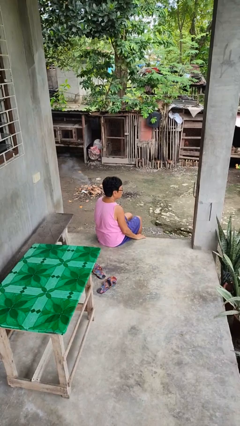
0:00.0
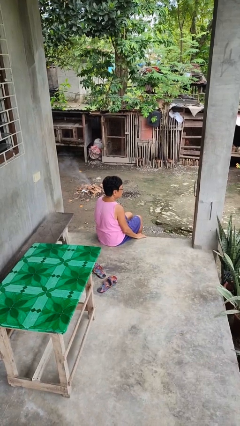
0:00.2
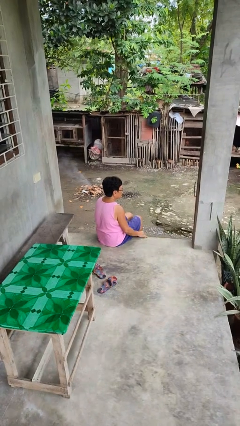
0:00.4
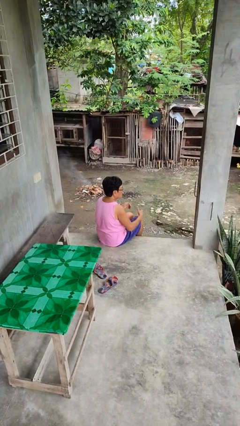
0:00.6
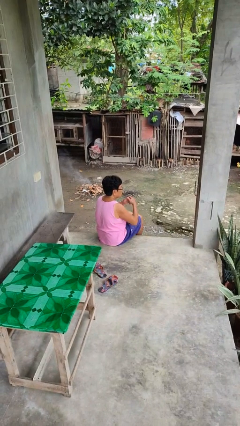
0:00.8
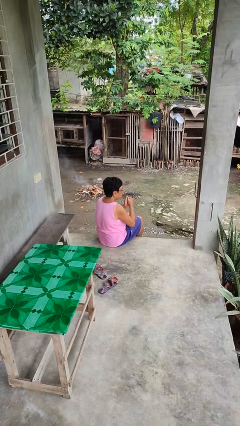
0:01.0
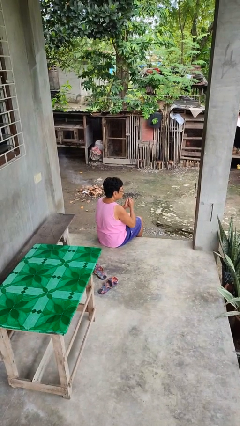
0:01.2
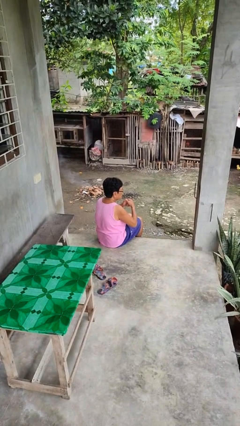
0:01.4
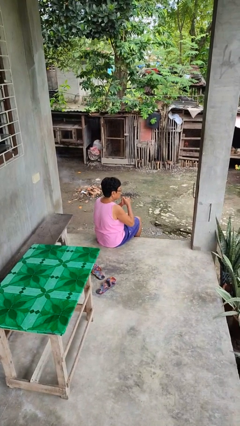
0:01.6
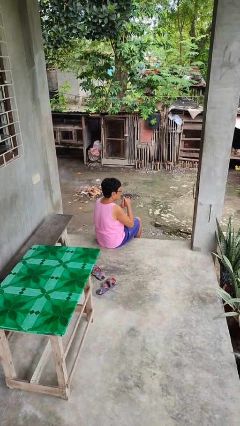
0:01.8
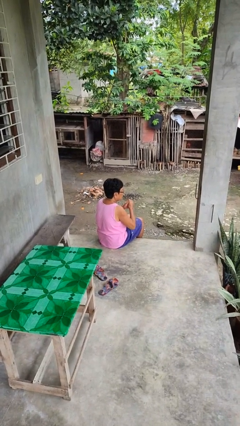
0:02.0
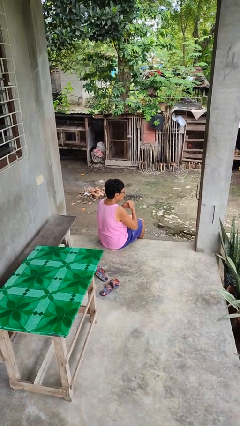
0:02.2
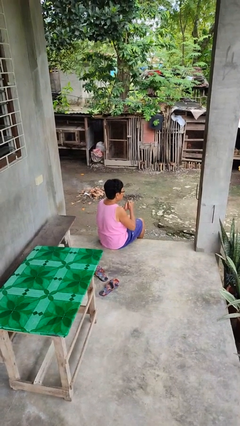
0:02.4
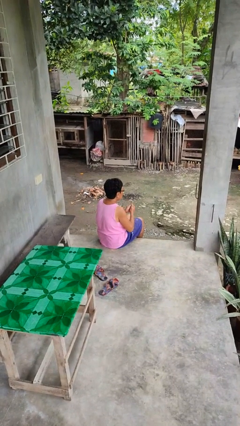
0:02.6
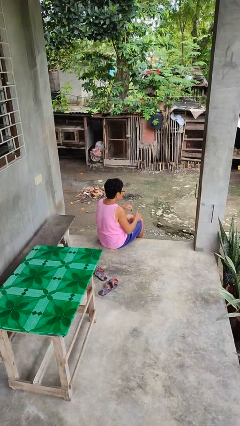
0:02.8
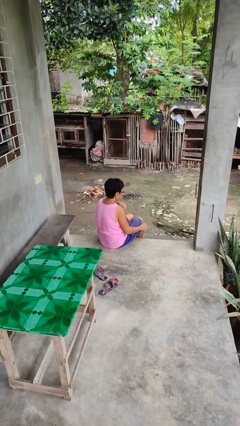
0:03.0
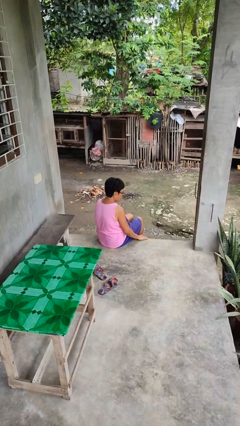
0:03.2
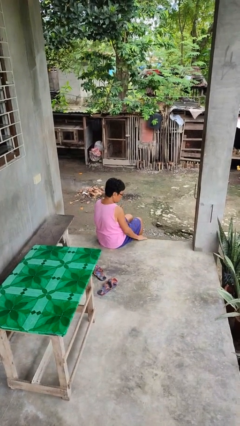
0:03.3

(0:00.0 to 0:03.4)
person cracks knuckles

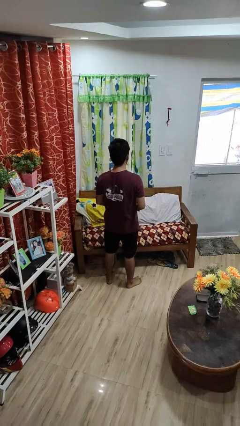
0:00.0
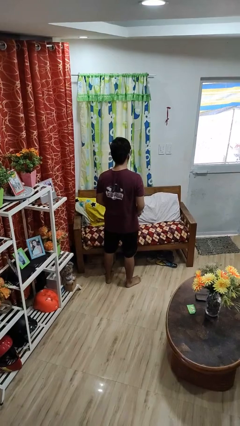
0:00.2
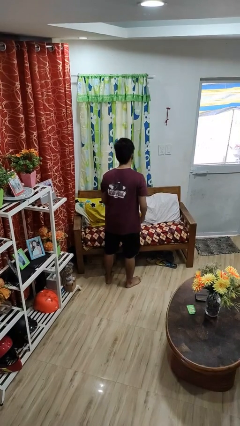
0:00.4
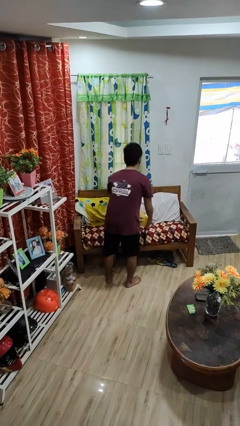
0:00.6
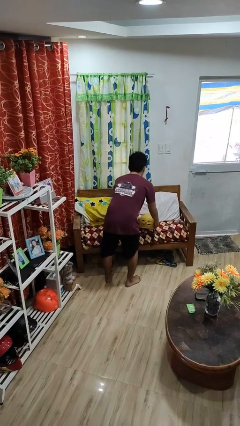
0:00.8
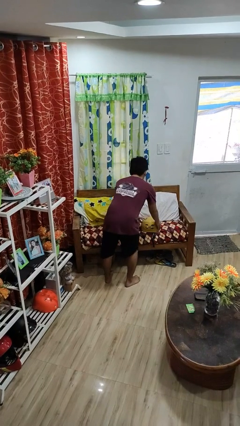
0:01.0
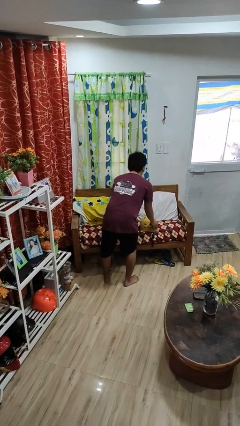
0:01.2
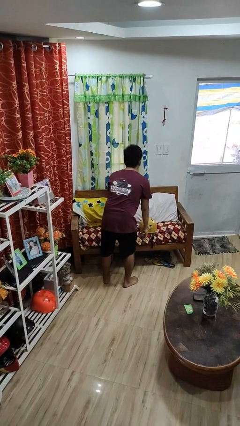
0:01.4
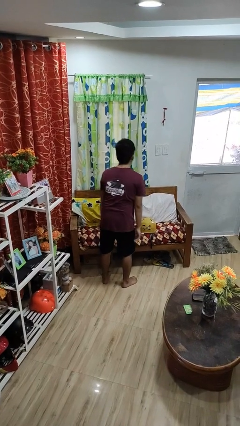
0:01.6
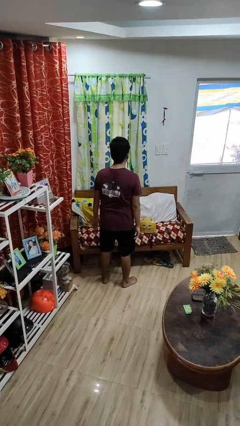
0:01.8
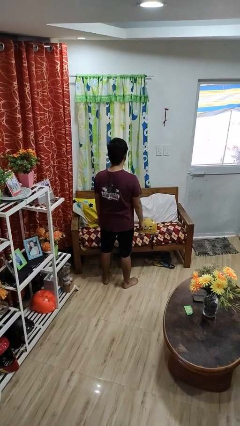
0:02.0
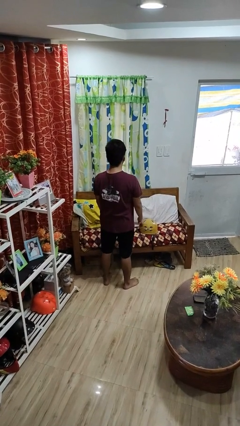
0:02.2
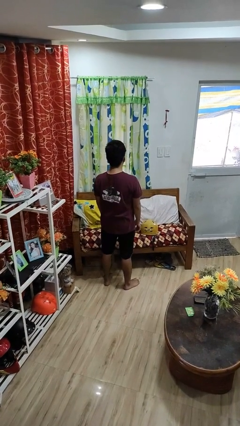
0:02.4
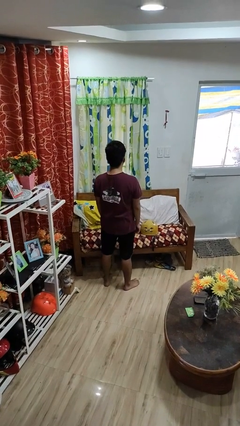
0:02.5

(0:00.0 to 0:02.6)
person puts down object on couch

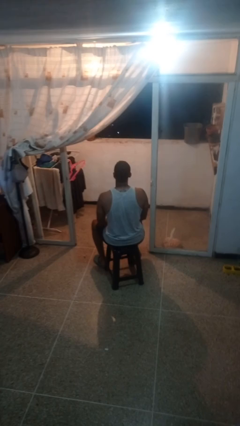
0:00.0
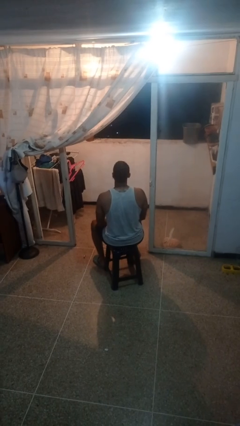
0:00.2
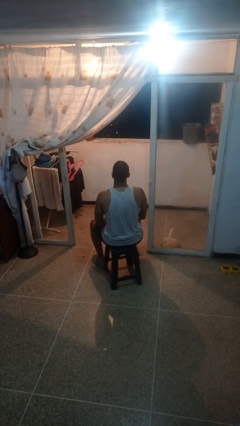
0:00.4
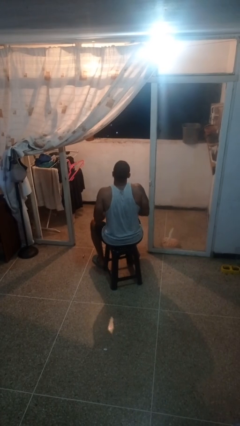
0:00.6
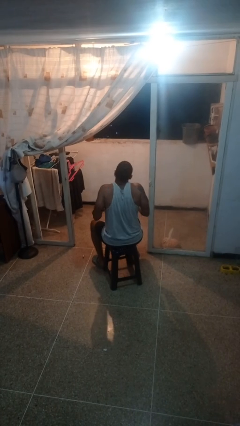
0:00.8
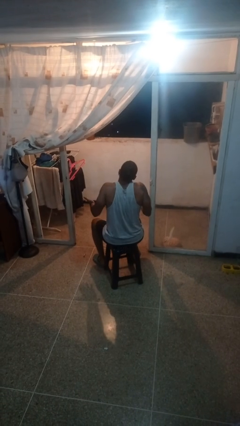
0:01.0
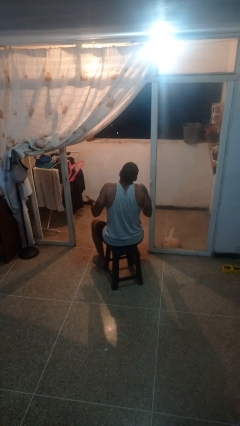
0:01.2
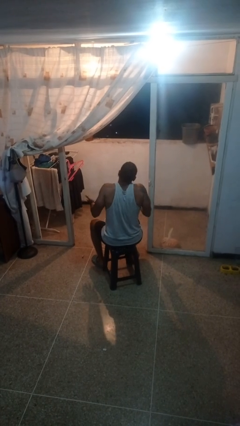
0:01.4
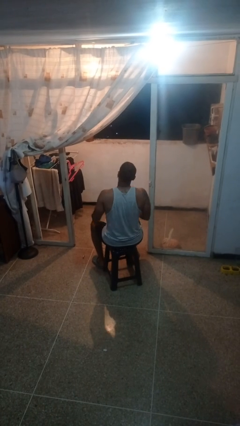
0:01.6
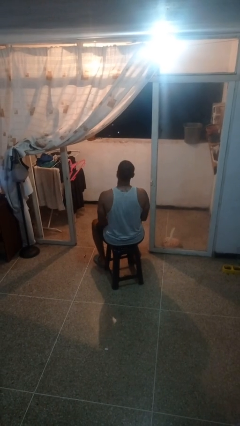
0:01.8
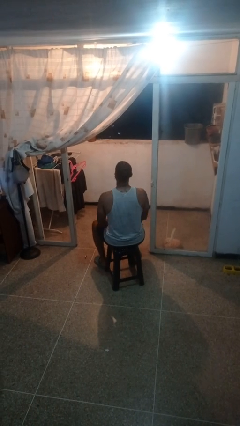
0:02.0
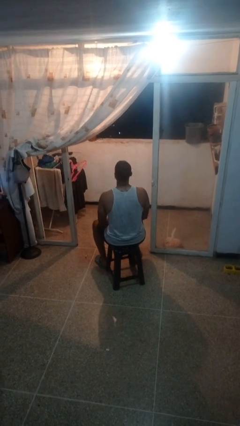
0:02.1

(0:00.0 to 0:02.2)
person shrugs

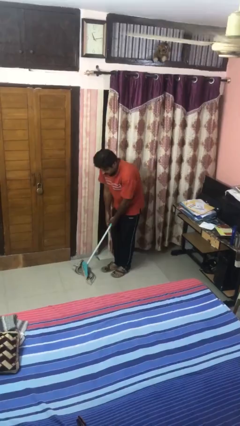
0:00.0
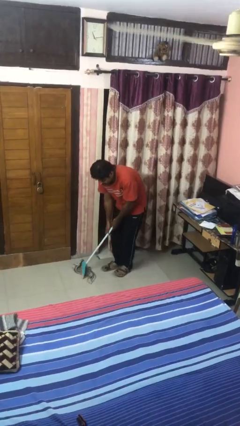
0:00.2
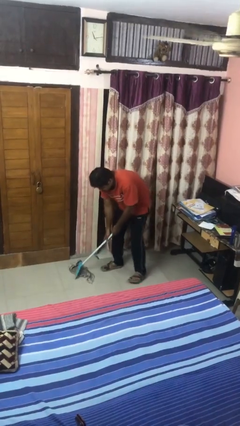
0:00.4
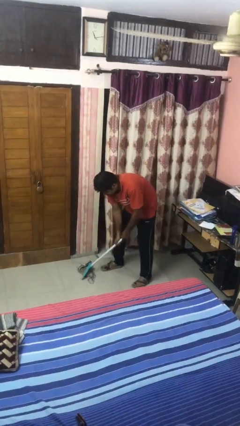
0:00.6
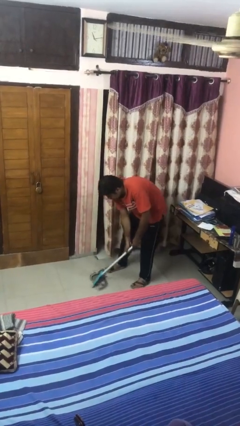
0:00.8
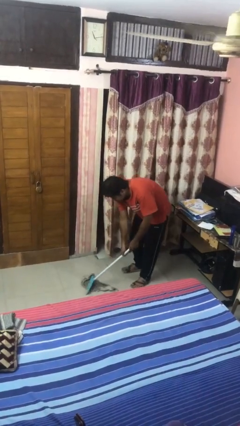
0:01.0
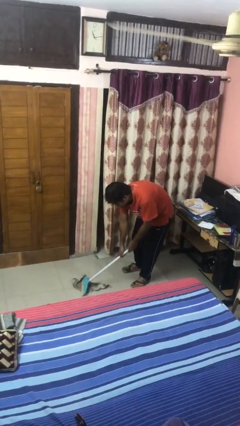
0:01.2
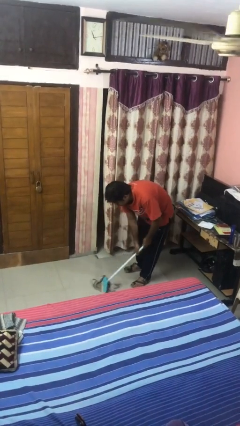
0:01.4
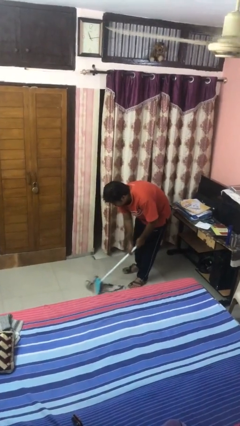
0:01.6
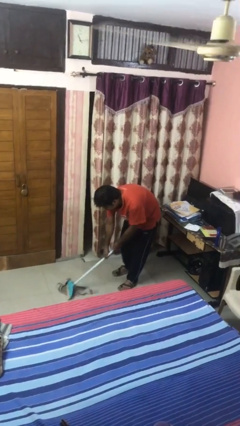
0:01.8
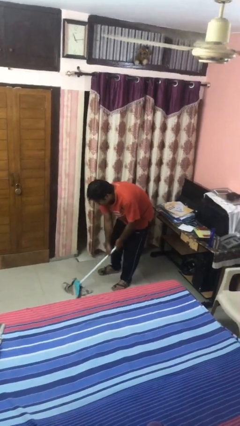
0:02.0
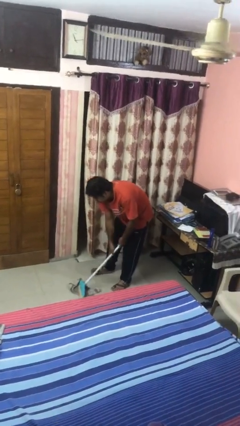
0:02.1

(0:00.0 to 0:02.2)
person mops

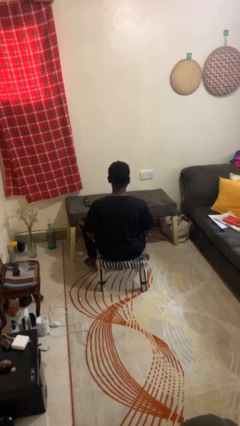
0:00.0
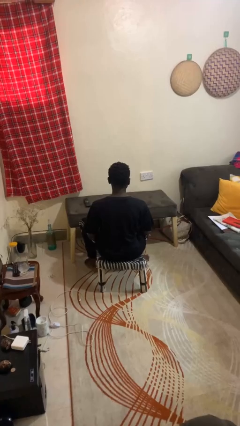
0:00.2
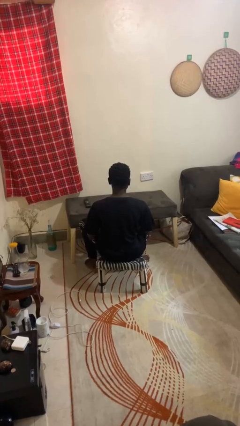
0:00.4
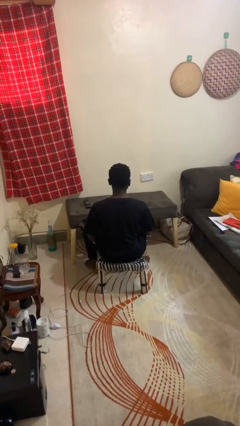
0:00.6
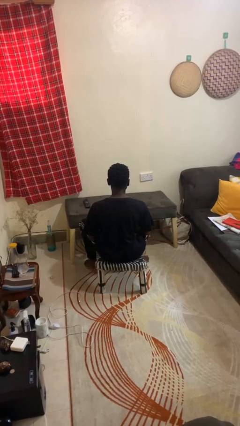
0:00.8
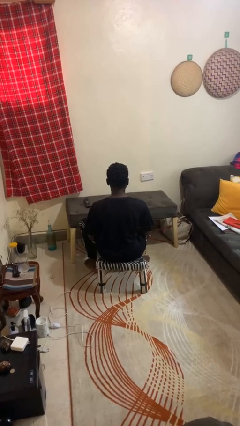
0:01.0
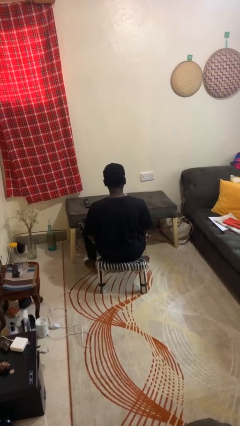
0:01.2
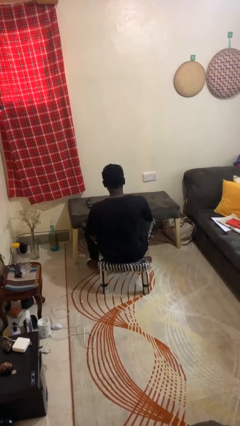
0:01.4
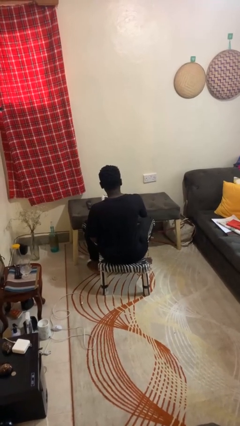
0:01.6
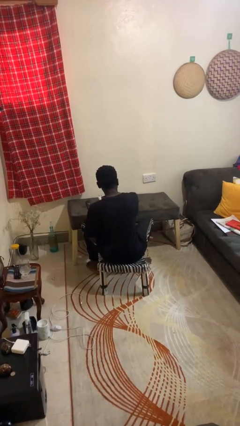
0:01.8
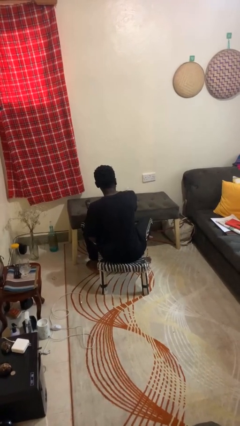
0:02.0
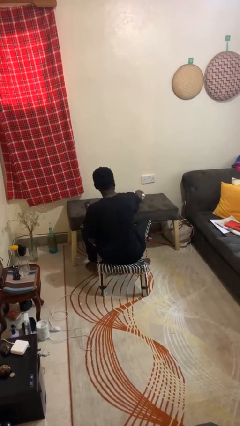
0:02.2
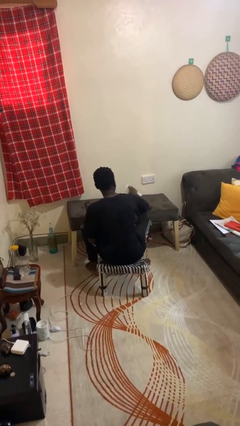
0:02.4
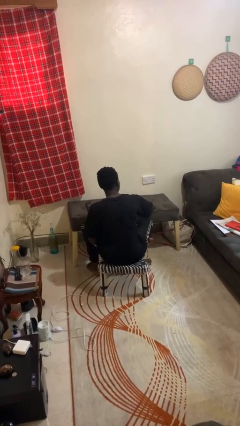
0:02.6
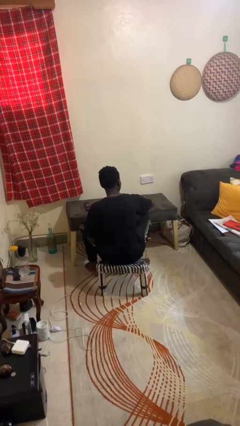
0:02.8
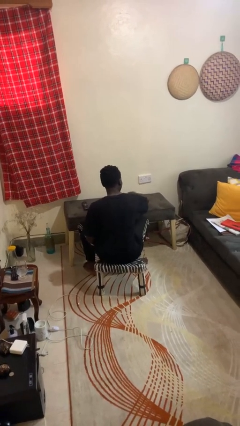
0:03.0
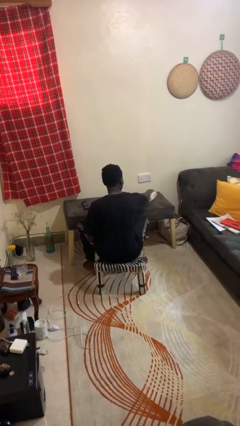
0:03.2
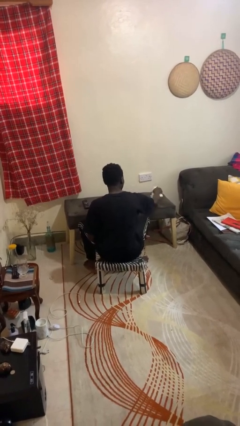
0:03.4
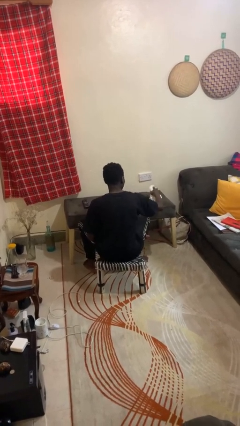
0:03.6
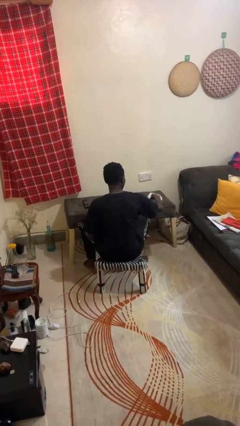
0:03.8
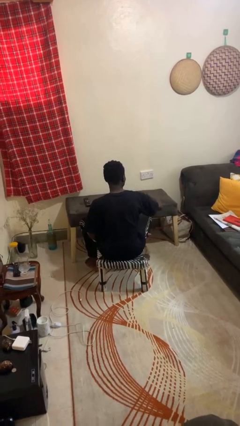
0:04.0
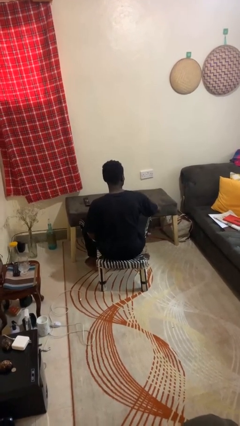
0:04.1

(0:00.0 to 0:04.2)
person cleans table with rag

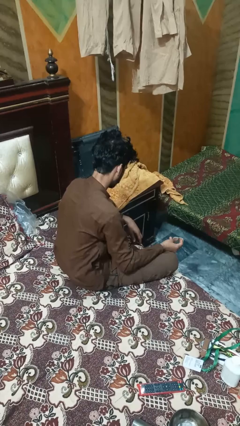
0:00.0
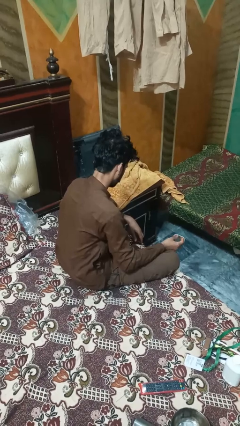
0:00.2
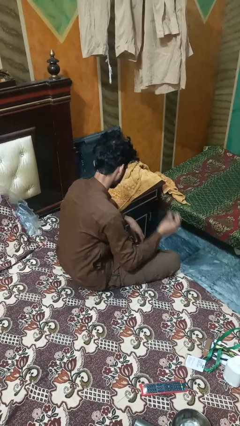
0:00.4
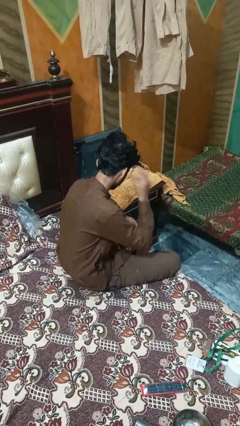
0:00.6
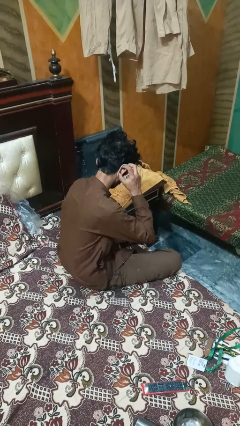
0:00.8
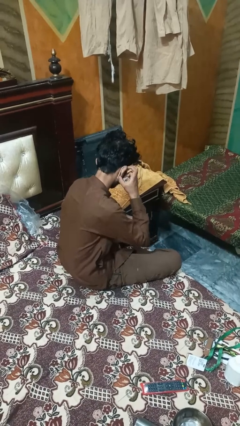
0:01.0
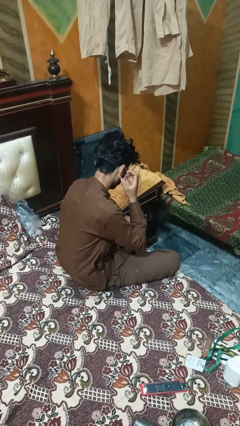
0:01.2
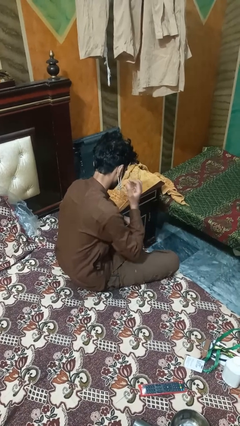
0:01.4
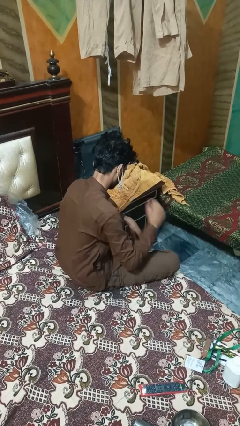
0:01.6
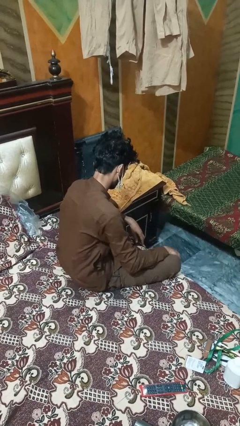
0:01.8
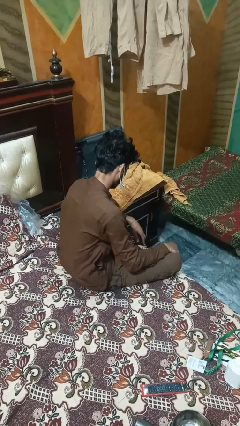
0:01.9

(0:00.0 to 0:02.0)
person puts on earrings

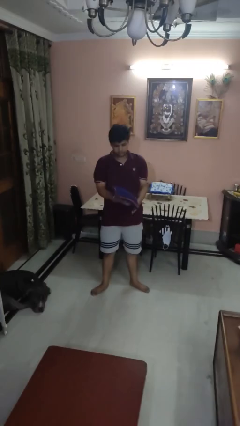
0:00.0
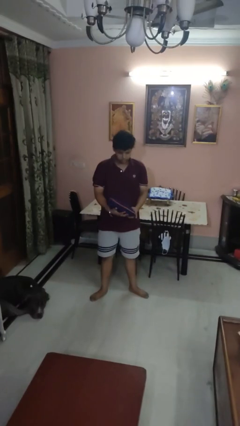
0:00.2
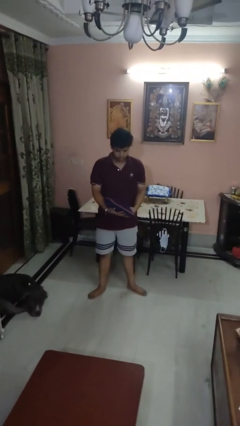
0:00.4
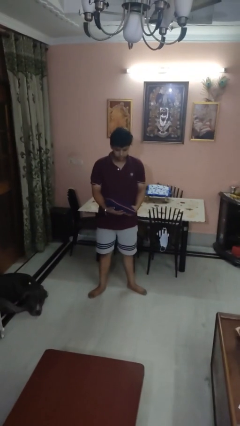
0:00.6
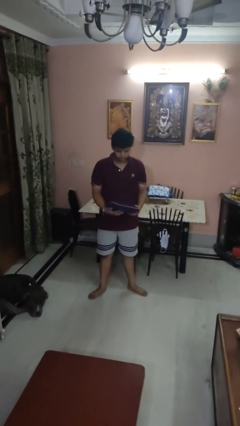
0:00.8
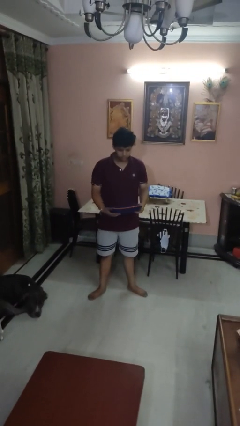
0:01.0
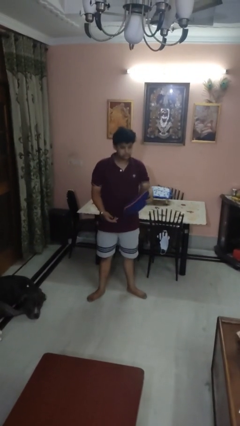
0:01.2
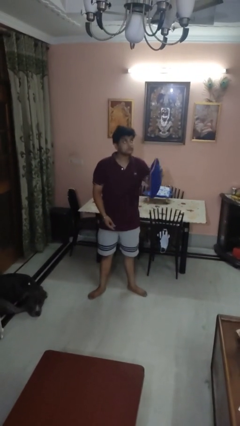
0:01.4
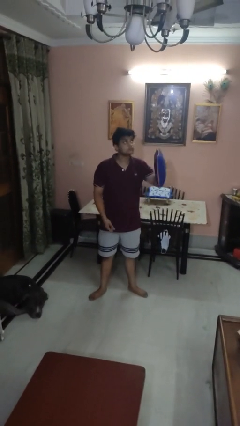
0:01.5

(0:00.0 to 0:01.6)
person catches dropped object
